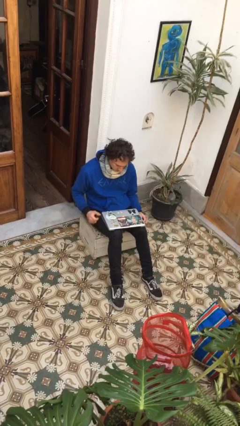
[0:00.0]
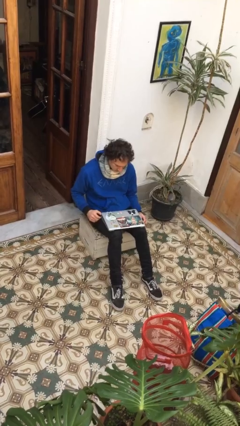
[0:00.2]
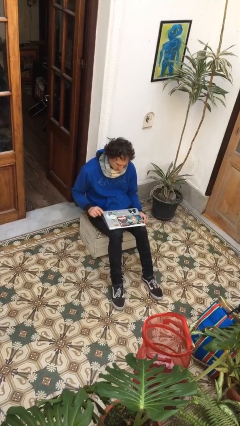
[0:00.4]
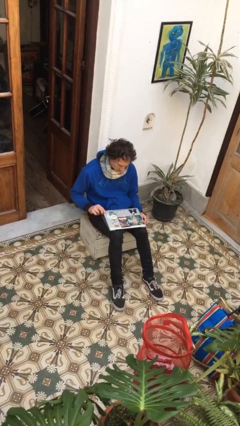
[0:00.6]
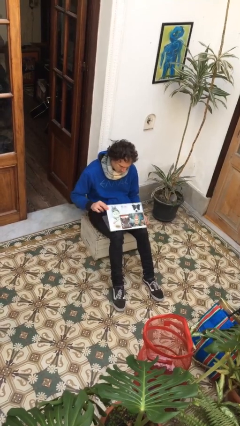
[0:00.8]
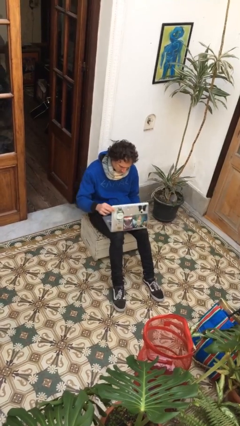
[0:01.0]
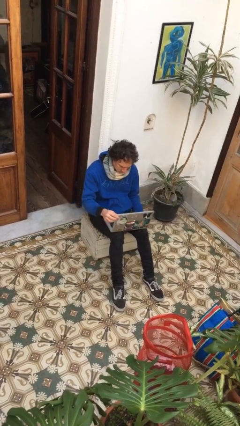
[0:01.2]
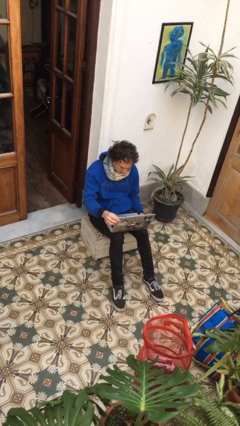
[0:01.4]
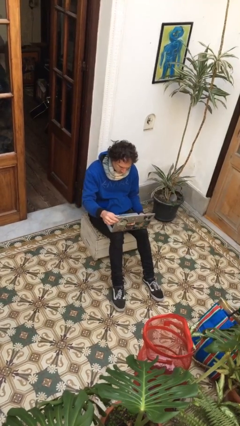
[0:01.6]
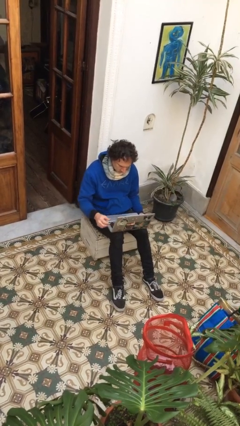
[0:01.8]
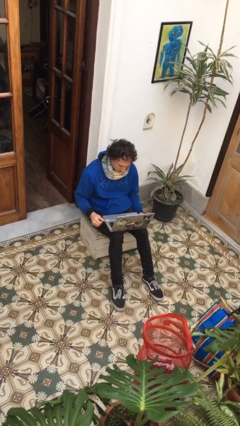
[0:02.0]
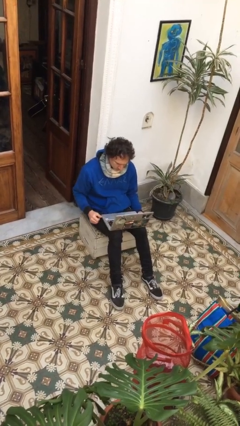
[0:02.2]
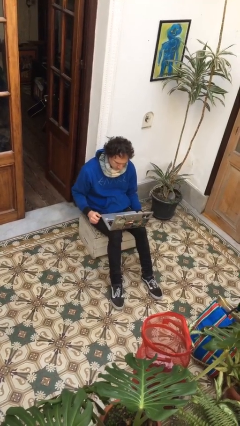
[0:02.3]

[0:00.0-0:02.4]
person opens laptop

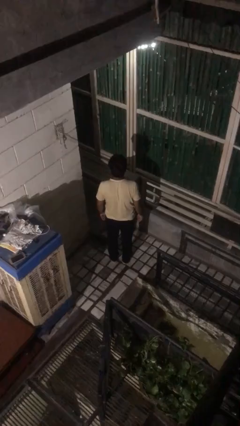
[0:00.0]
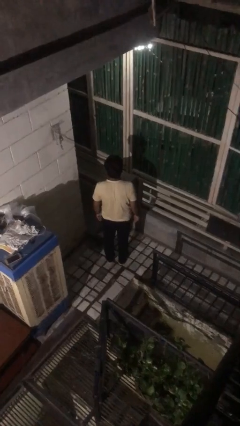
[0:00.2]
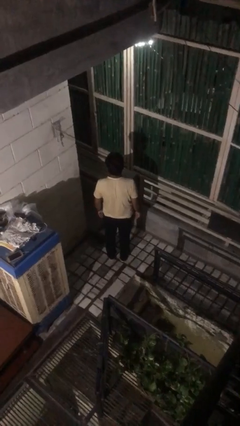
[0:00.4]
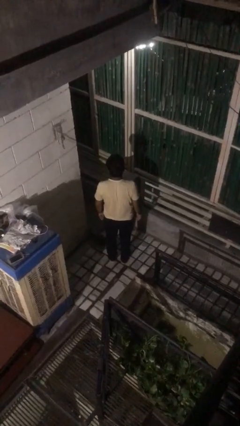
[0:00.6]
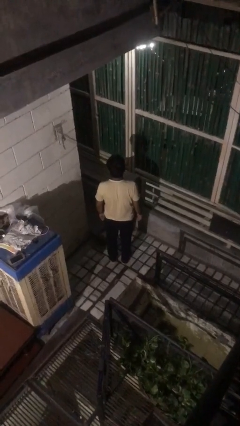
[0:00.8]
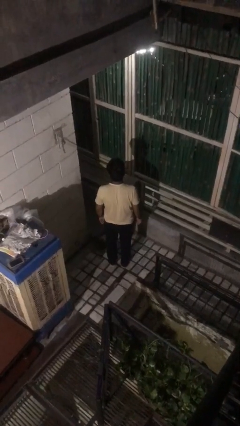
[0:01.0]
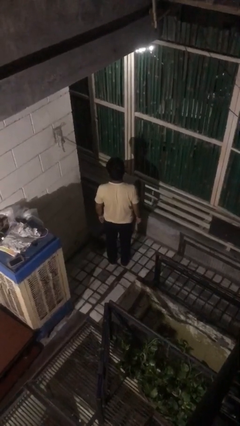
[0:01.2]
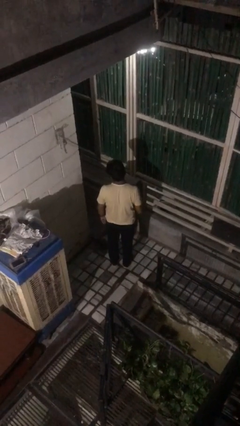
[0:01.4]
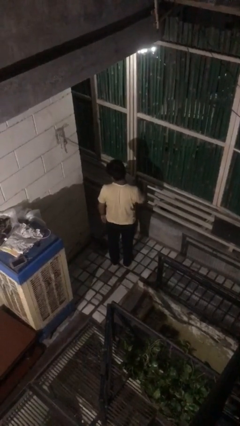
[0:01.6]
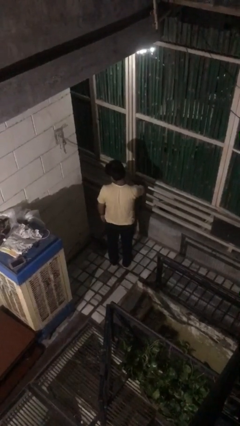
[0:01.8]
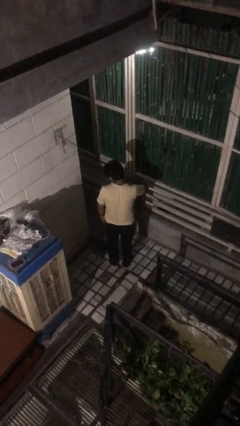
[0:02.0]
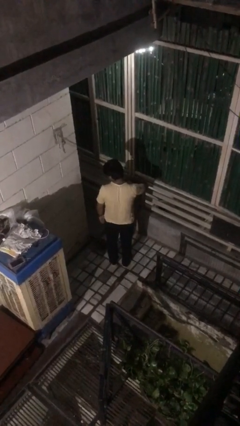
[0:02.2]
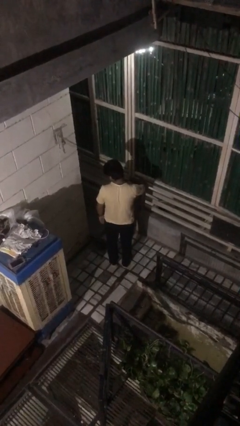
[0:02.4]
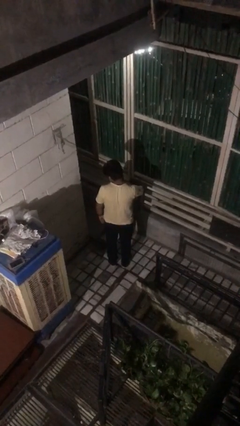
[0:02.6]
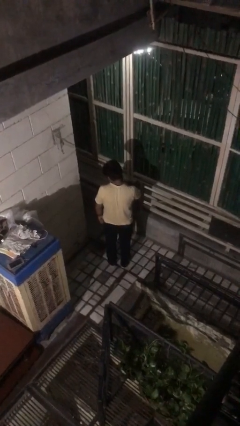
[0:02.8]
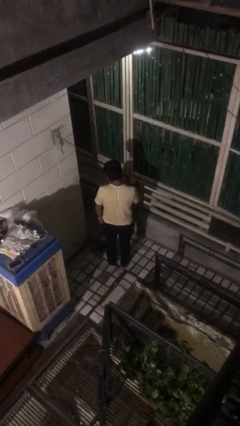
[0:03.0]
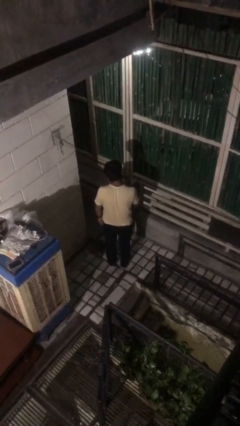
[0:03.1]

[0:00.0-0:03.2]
person swats bug

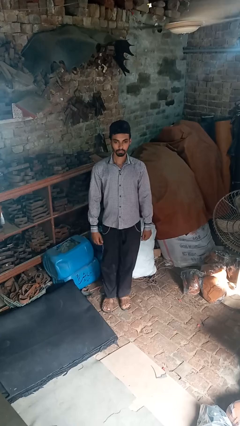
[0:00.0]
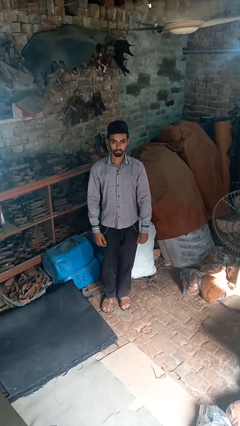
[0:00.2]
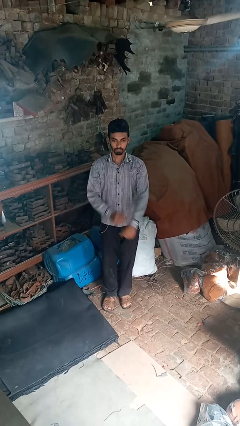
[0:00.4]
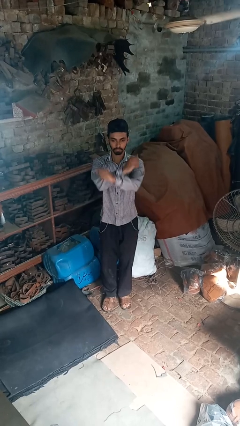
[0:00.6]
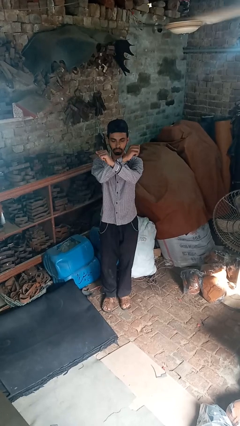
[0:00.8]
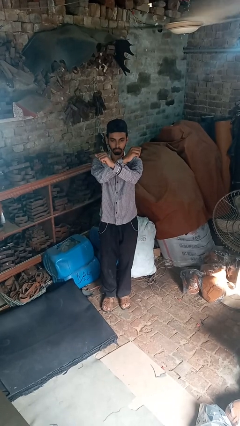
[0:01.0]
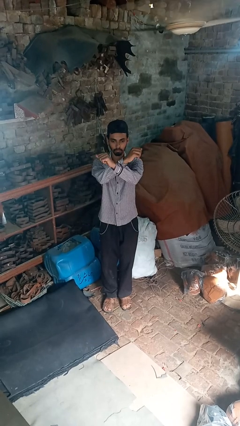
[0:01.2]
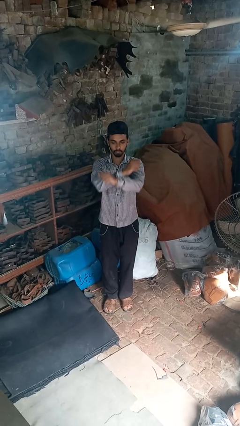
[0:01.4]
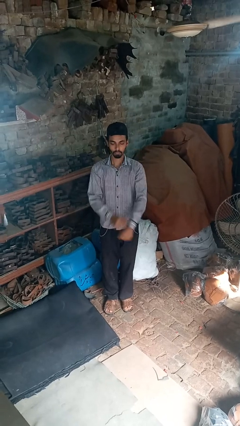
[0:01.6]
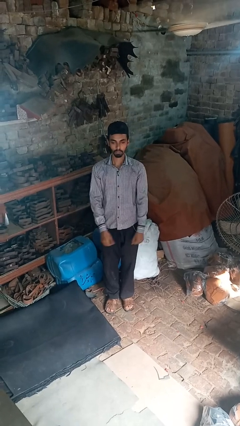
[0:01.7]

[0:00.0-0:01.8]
person karate chop

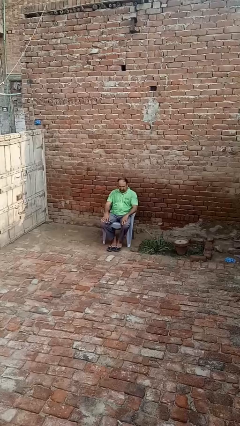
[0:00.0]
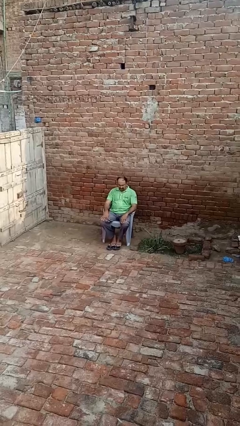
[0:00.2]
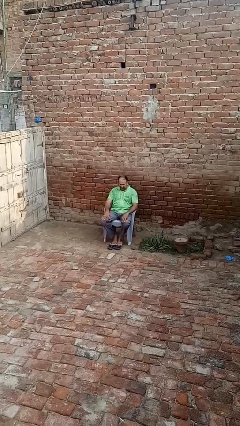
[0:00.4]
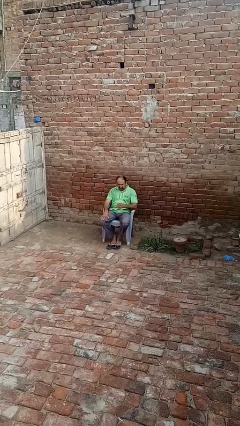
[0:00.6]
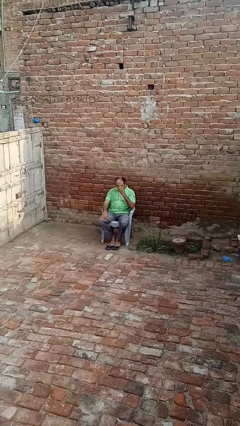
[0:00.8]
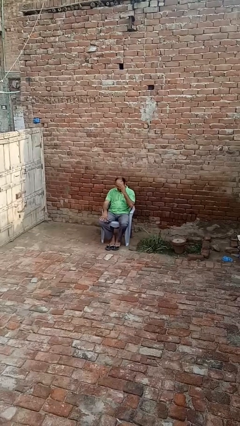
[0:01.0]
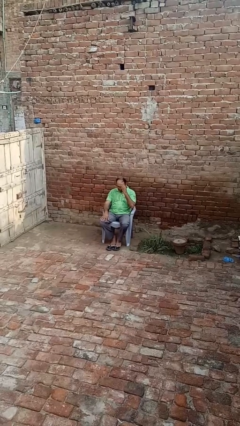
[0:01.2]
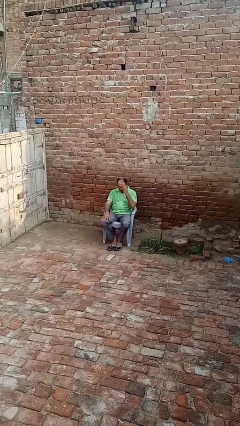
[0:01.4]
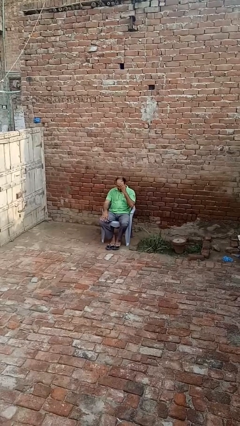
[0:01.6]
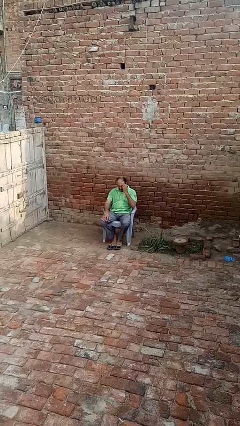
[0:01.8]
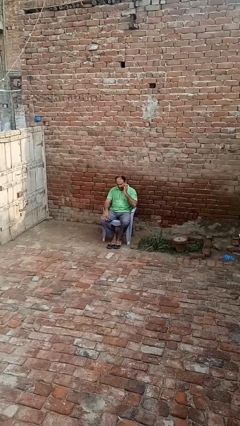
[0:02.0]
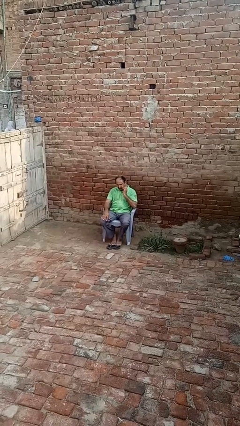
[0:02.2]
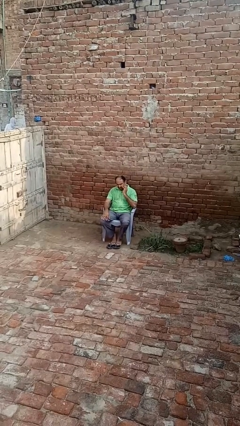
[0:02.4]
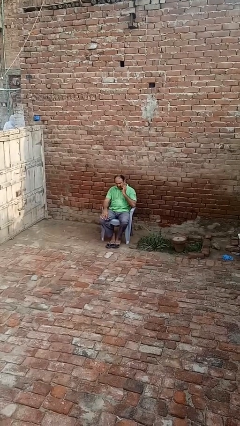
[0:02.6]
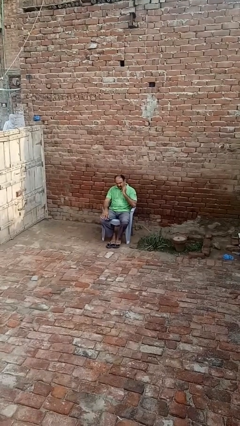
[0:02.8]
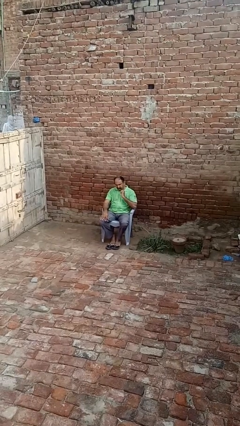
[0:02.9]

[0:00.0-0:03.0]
person scratches face

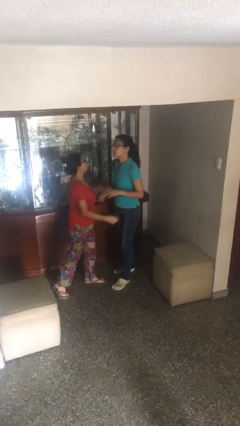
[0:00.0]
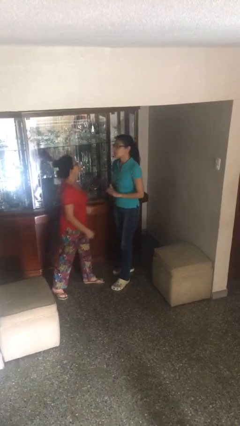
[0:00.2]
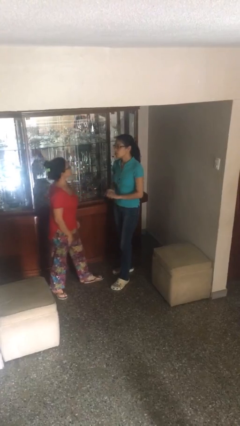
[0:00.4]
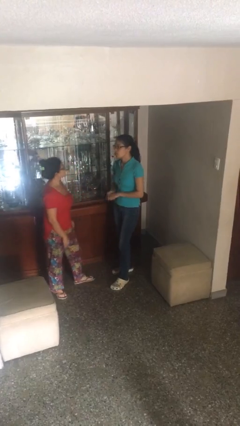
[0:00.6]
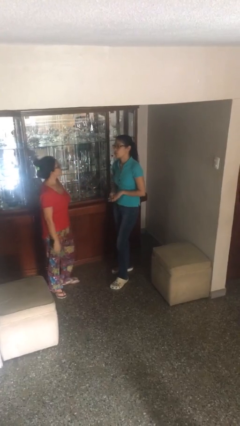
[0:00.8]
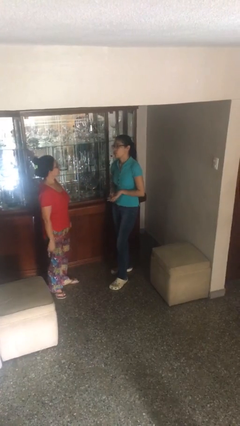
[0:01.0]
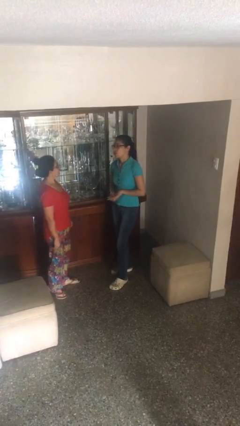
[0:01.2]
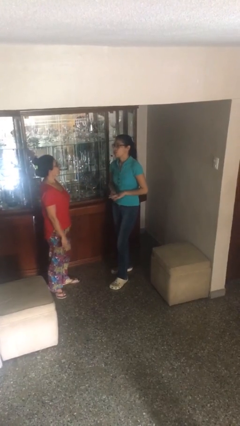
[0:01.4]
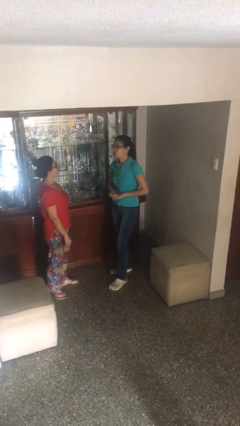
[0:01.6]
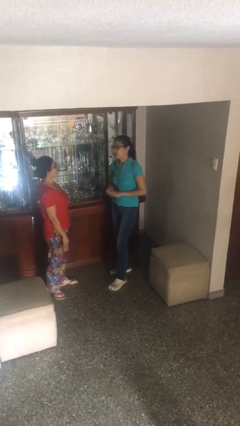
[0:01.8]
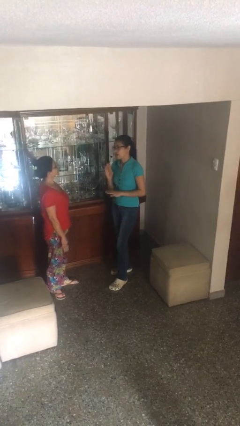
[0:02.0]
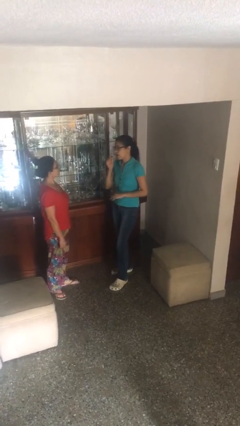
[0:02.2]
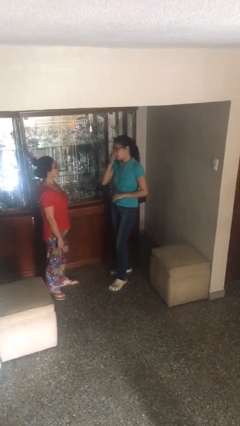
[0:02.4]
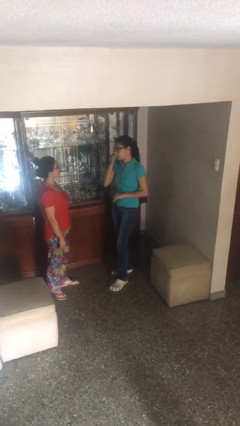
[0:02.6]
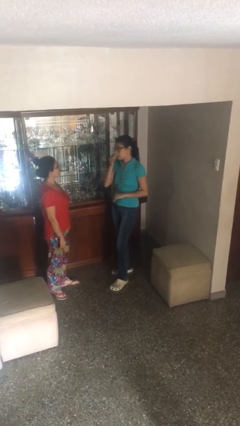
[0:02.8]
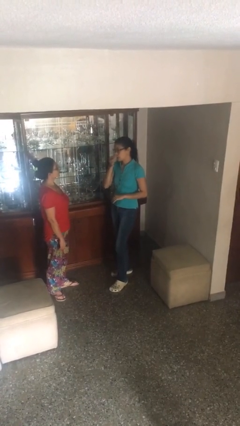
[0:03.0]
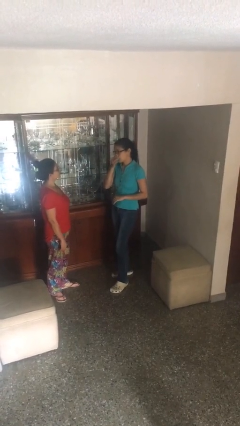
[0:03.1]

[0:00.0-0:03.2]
person talks to person

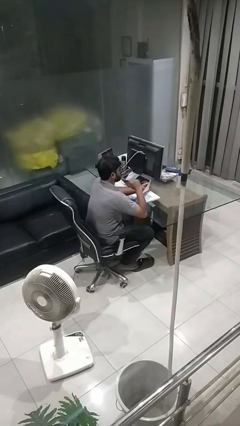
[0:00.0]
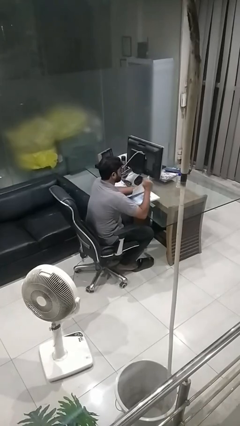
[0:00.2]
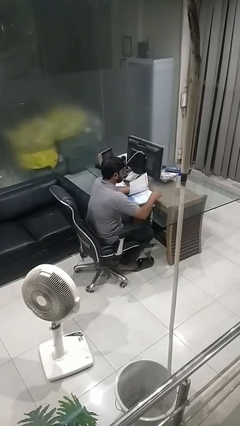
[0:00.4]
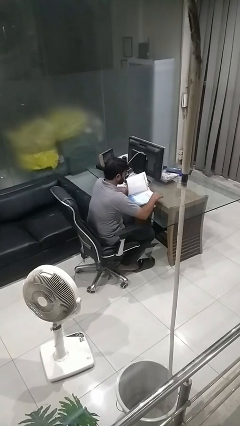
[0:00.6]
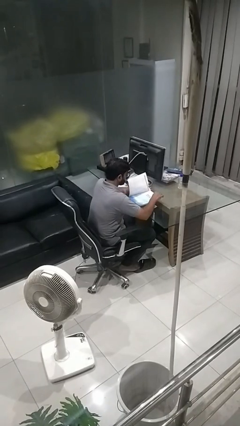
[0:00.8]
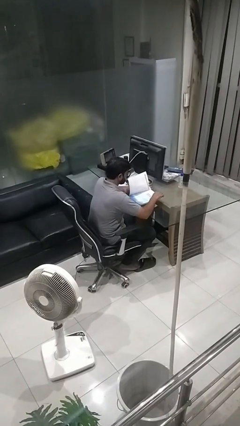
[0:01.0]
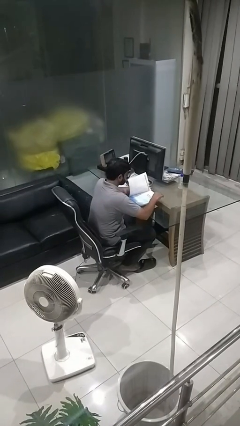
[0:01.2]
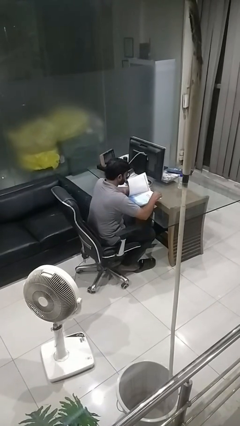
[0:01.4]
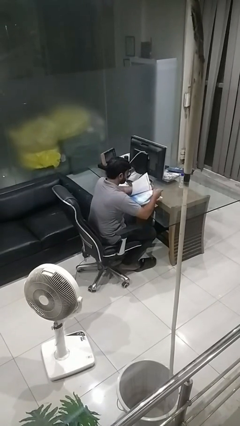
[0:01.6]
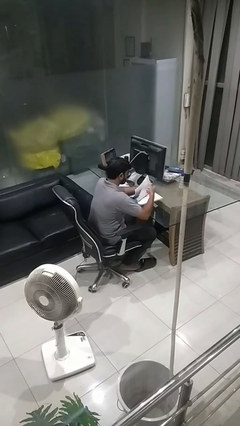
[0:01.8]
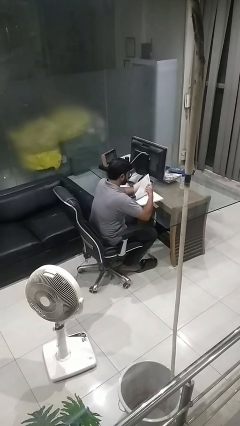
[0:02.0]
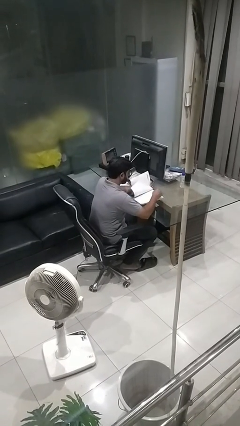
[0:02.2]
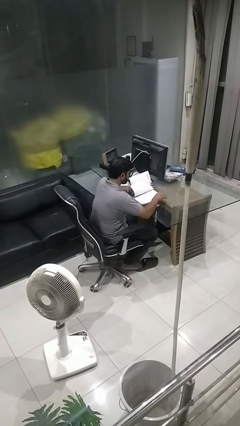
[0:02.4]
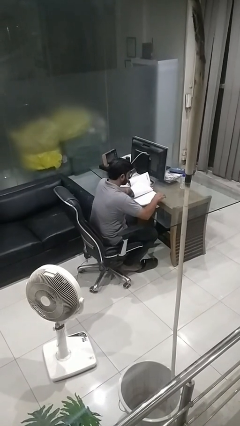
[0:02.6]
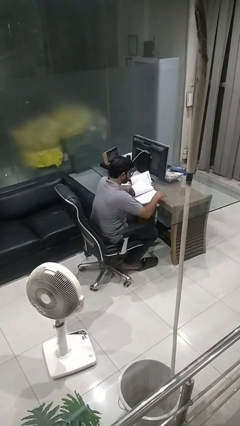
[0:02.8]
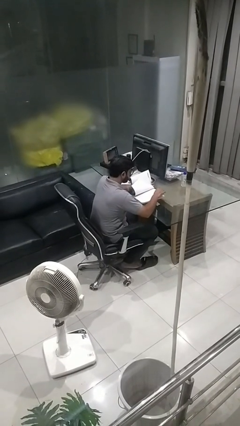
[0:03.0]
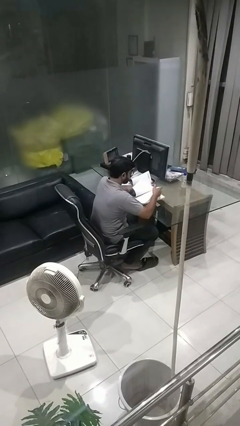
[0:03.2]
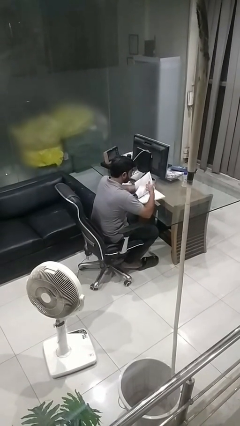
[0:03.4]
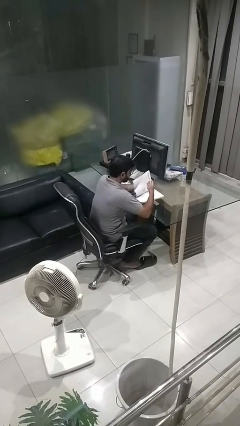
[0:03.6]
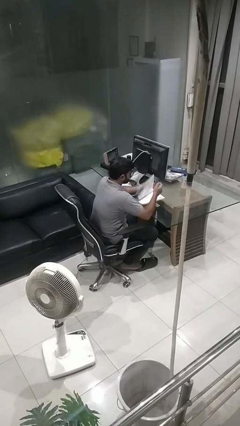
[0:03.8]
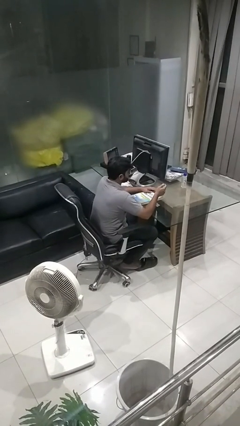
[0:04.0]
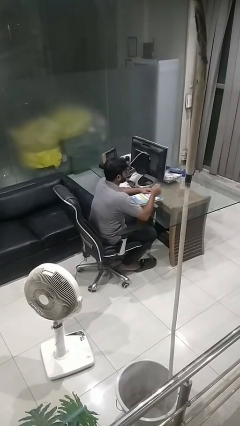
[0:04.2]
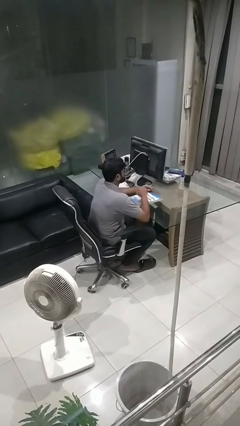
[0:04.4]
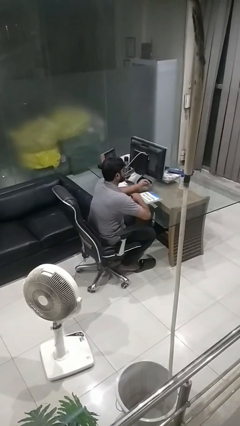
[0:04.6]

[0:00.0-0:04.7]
person reads book
